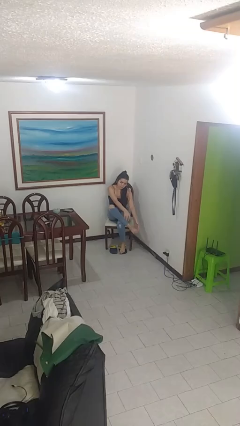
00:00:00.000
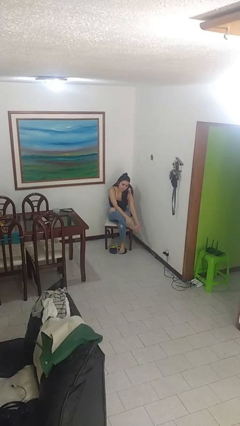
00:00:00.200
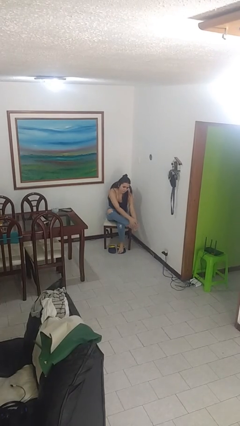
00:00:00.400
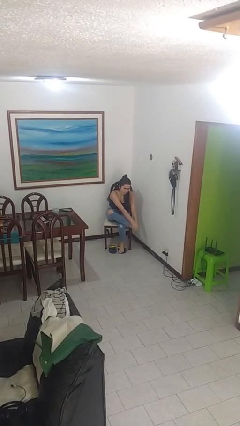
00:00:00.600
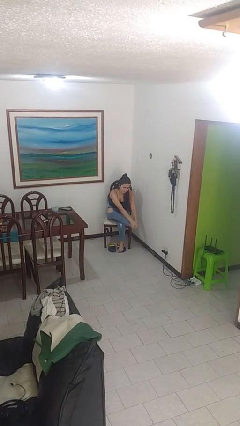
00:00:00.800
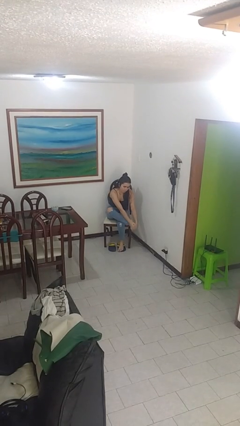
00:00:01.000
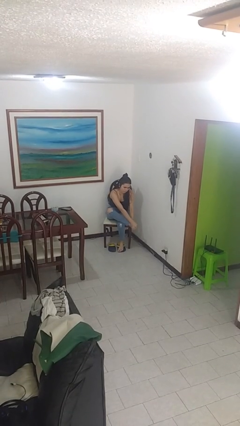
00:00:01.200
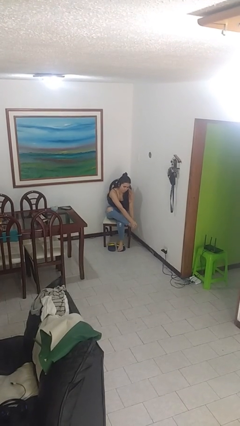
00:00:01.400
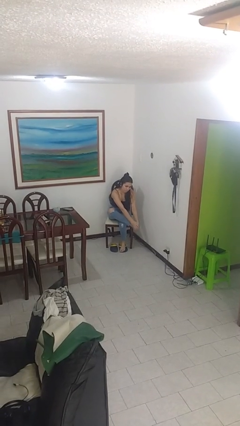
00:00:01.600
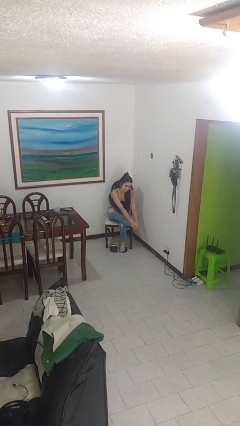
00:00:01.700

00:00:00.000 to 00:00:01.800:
person rubs foot

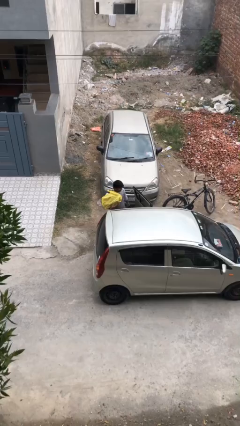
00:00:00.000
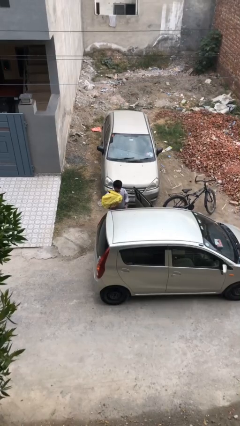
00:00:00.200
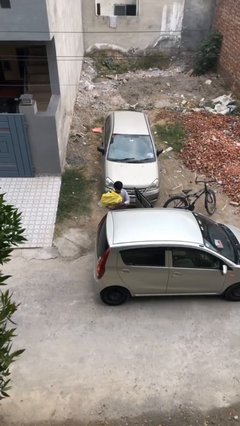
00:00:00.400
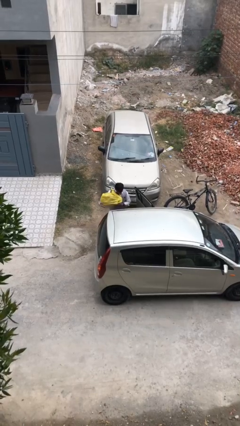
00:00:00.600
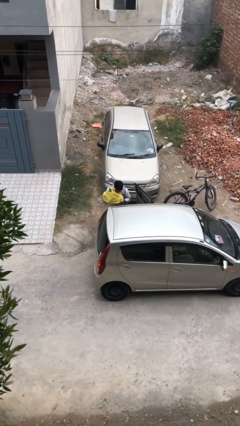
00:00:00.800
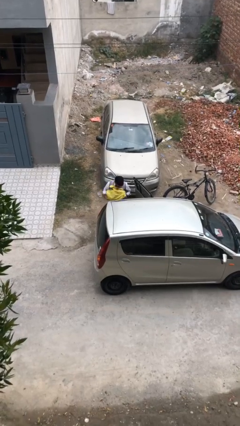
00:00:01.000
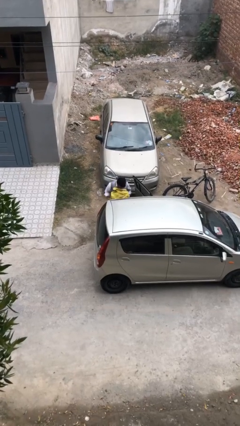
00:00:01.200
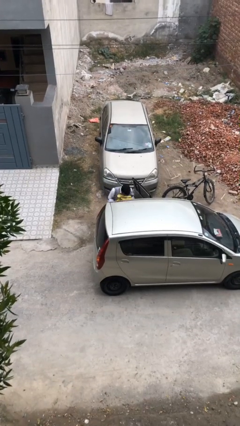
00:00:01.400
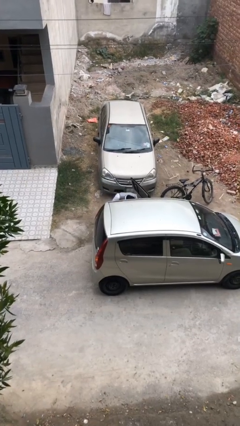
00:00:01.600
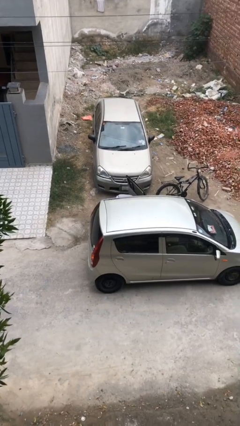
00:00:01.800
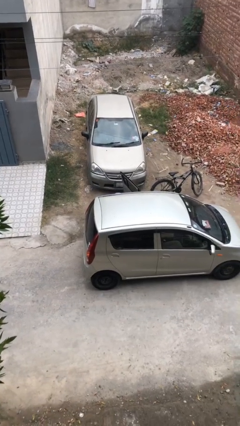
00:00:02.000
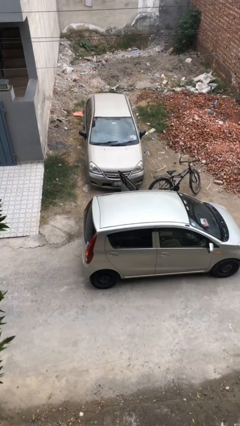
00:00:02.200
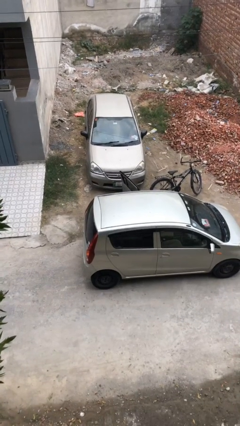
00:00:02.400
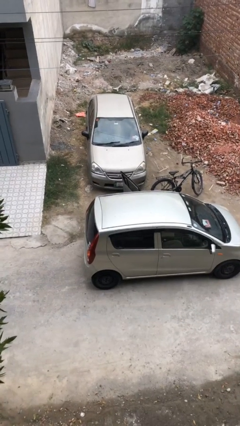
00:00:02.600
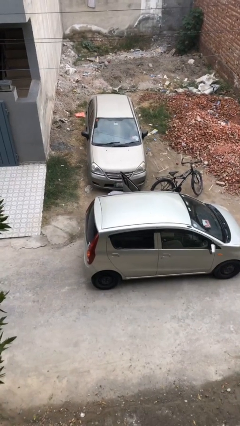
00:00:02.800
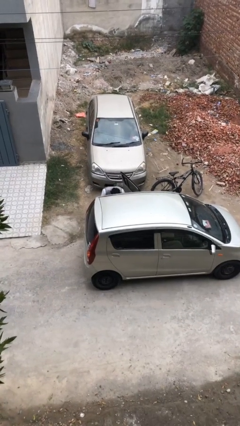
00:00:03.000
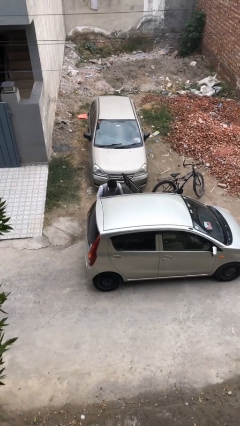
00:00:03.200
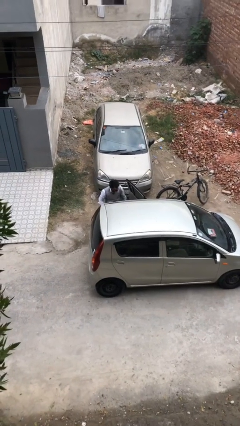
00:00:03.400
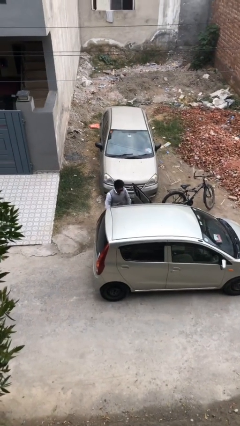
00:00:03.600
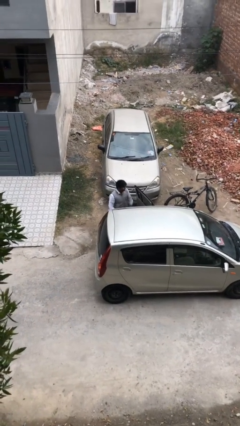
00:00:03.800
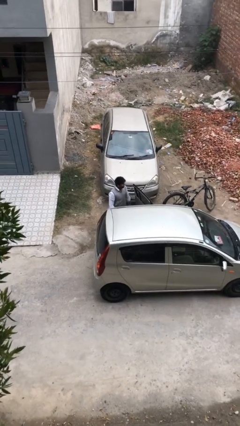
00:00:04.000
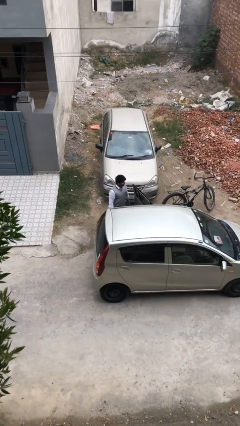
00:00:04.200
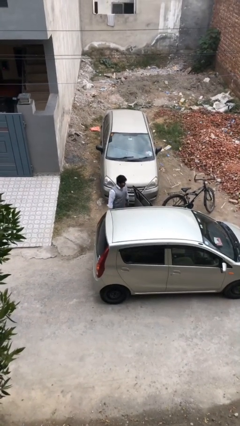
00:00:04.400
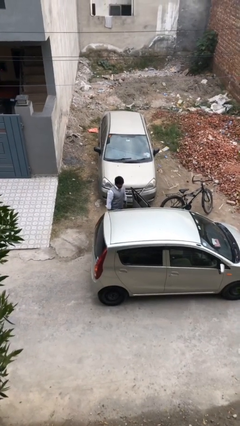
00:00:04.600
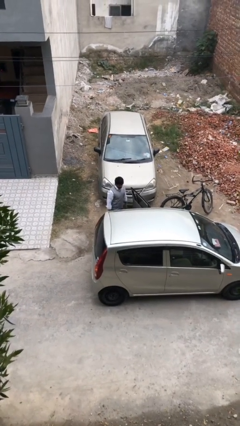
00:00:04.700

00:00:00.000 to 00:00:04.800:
person loads car

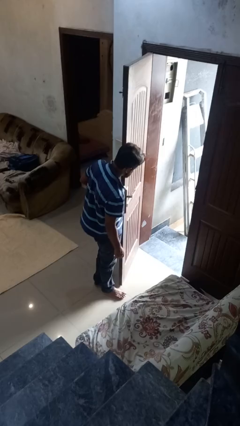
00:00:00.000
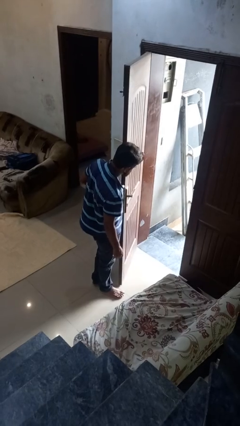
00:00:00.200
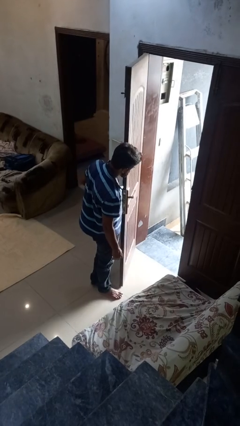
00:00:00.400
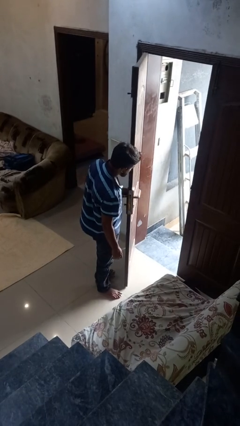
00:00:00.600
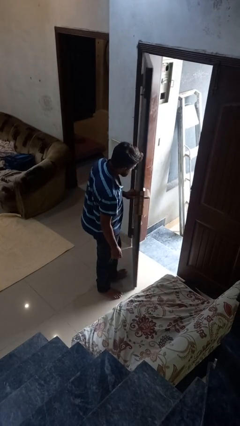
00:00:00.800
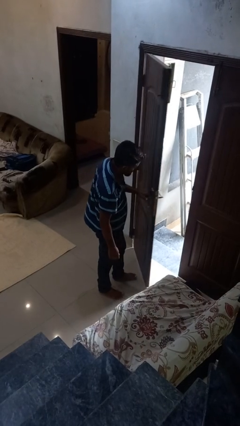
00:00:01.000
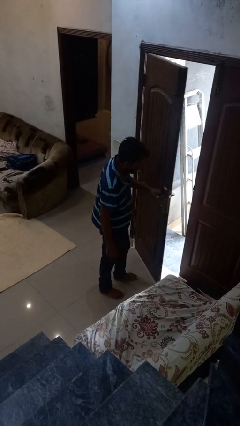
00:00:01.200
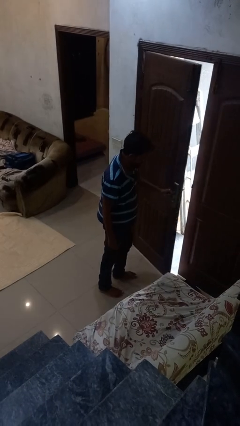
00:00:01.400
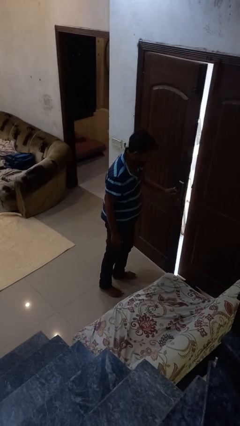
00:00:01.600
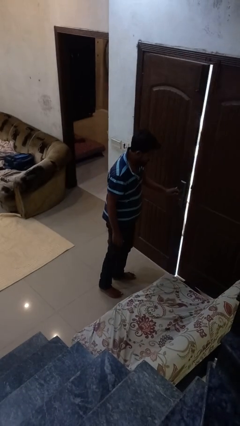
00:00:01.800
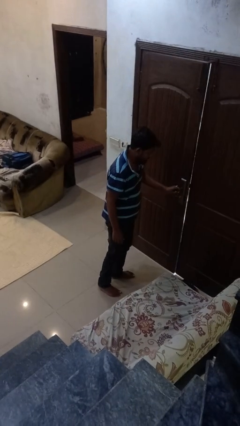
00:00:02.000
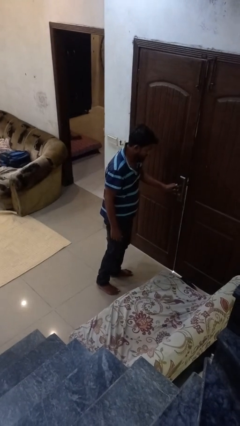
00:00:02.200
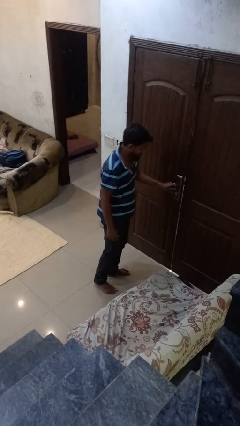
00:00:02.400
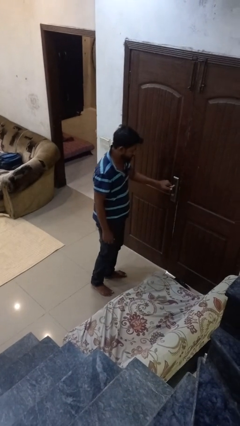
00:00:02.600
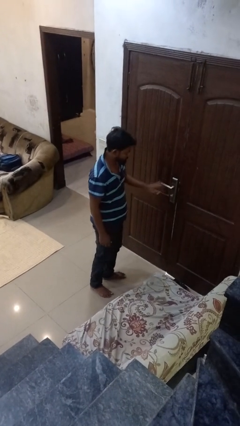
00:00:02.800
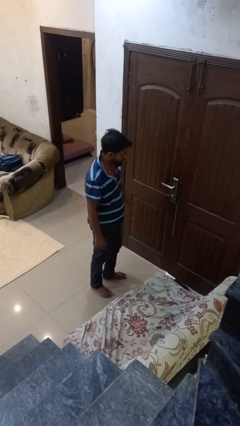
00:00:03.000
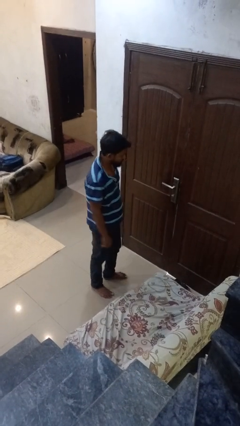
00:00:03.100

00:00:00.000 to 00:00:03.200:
person closes facility door

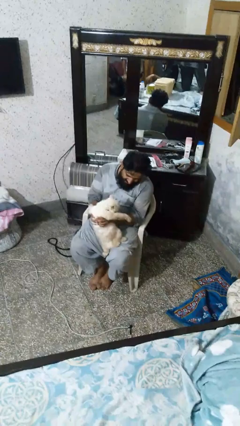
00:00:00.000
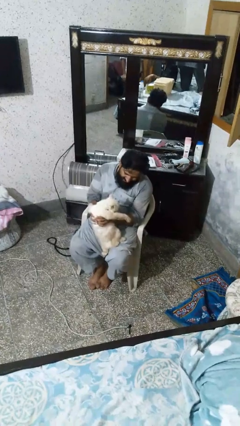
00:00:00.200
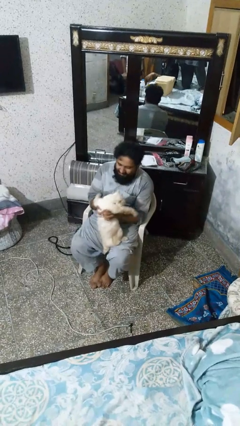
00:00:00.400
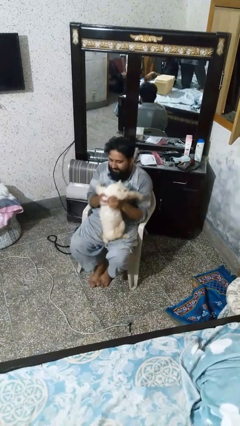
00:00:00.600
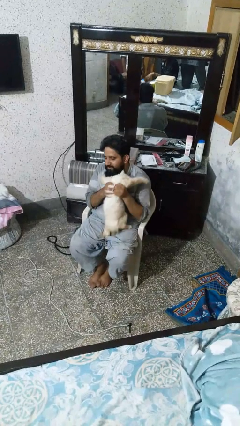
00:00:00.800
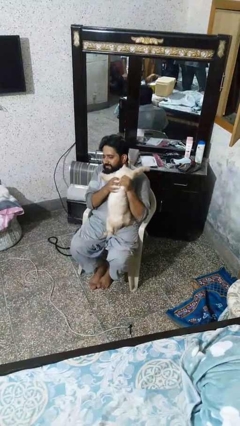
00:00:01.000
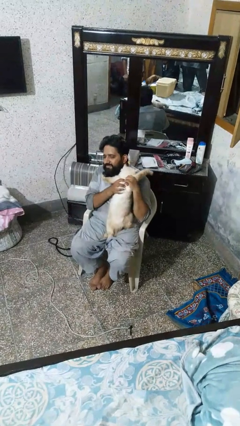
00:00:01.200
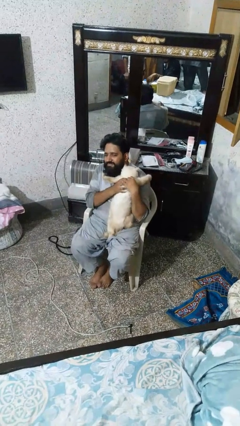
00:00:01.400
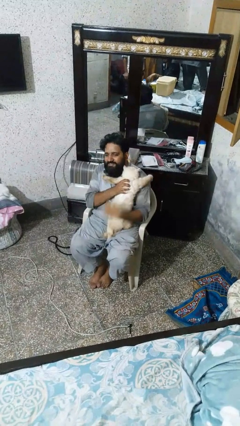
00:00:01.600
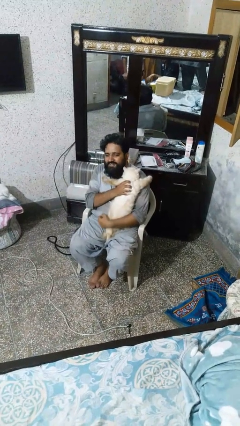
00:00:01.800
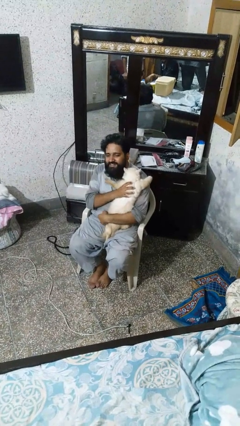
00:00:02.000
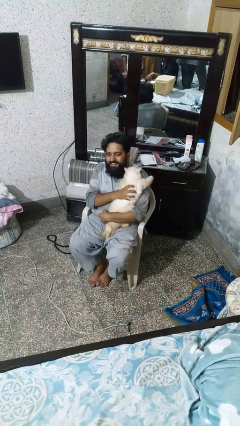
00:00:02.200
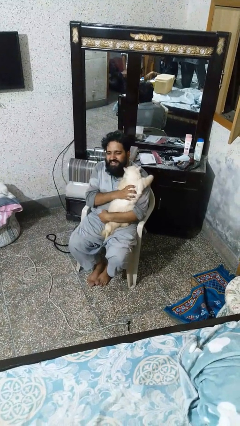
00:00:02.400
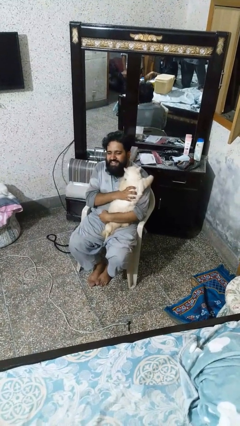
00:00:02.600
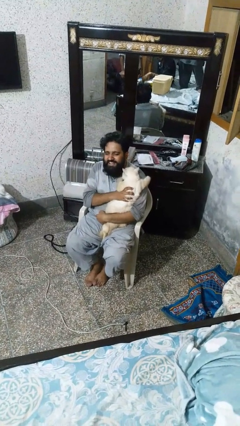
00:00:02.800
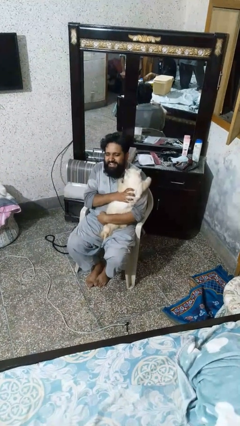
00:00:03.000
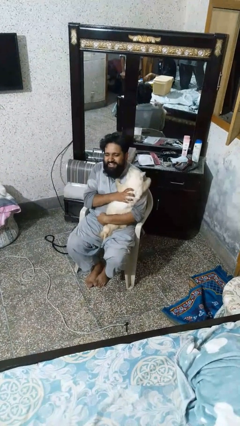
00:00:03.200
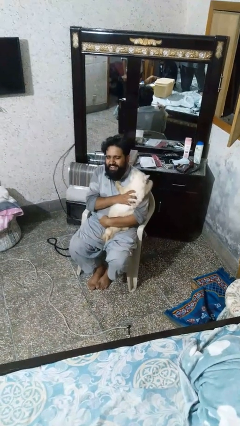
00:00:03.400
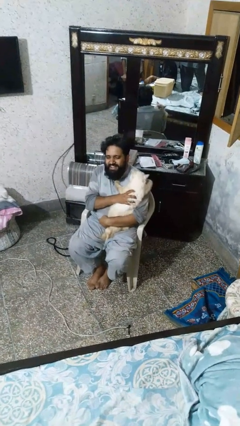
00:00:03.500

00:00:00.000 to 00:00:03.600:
person hugs cat

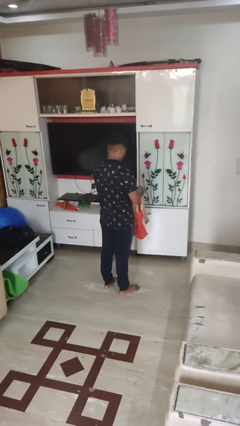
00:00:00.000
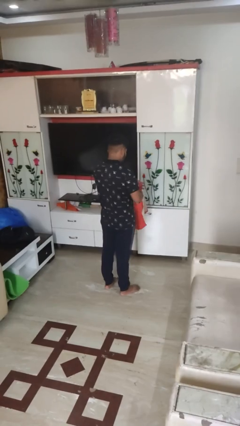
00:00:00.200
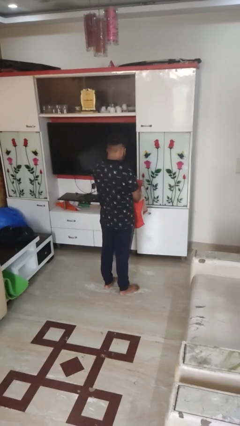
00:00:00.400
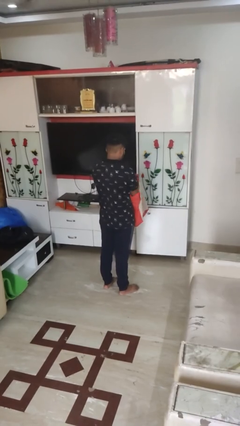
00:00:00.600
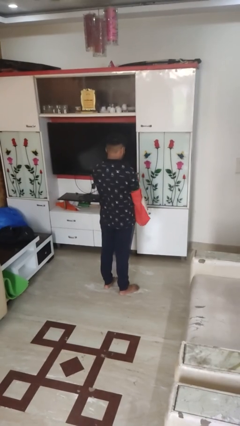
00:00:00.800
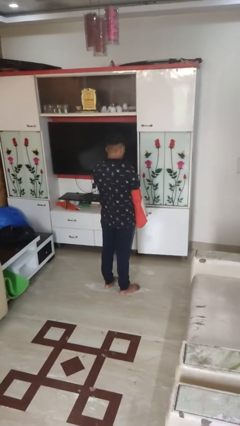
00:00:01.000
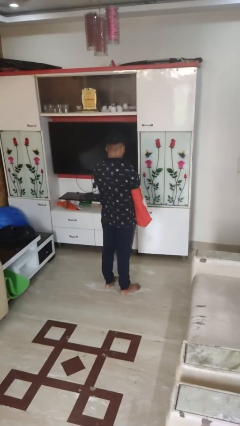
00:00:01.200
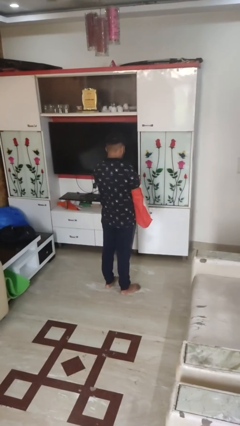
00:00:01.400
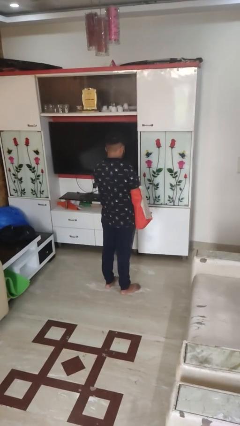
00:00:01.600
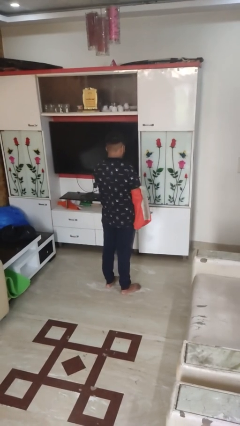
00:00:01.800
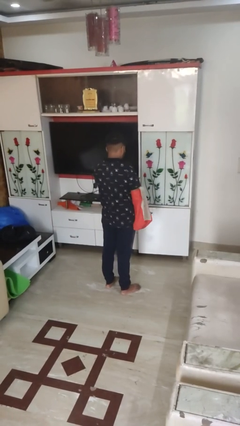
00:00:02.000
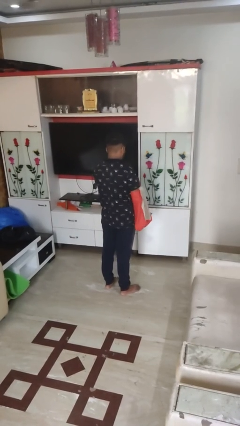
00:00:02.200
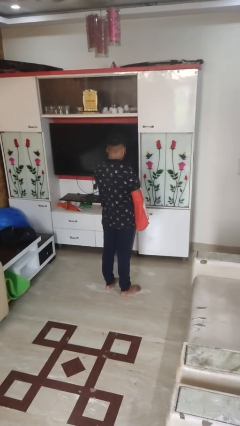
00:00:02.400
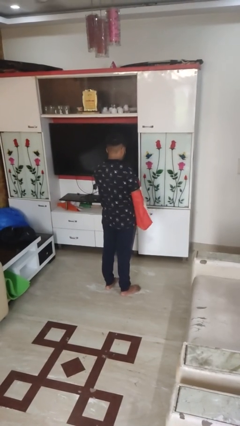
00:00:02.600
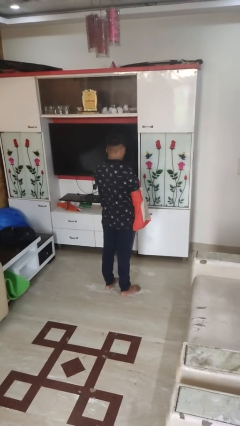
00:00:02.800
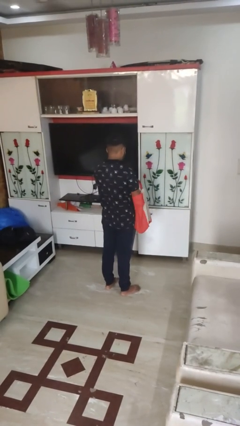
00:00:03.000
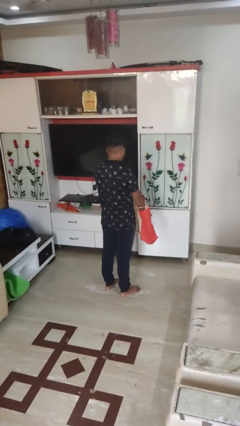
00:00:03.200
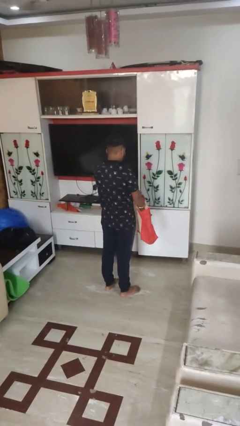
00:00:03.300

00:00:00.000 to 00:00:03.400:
person searches in bag

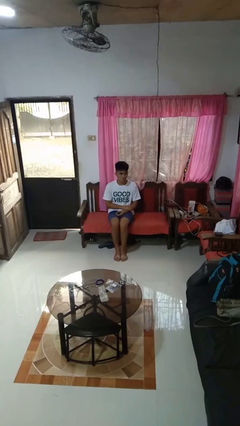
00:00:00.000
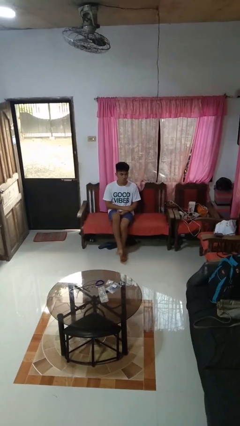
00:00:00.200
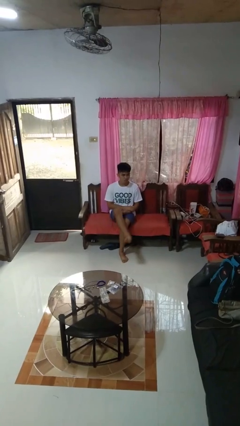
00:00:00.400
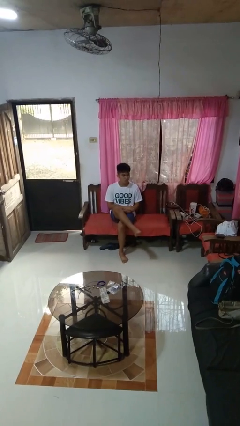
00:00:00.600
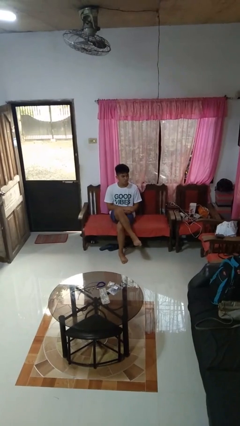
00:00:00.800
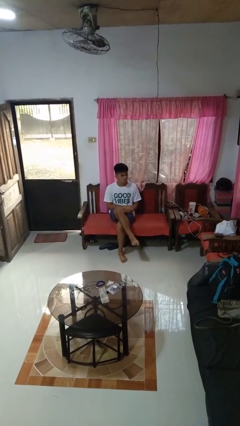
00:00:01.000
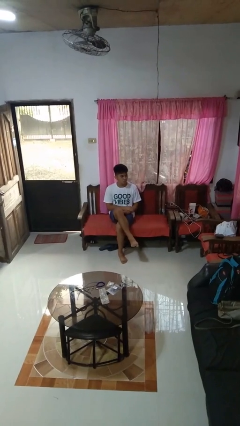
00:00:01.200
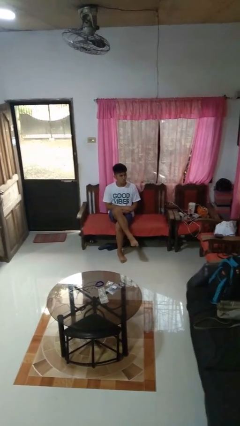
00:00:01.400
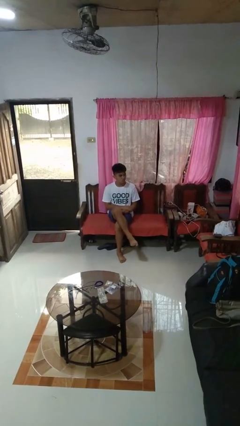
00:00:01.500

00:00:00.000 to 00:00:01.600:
person crosses legs
